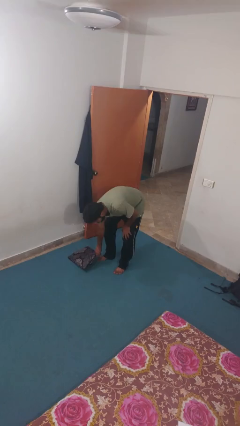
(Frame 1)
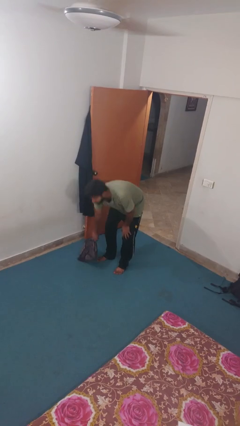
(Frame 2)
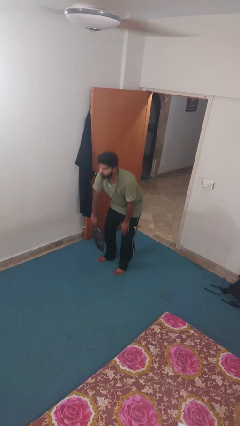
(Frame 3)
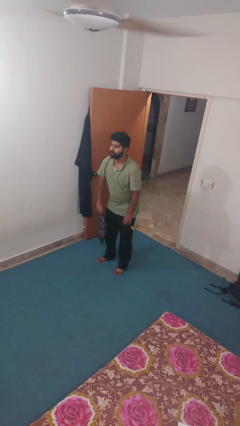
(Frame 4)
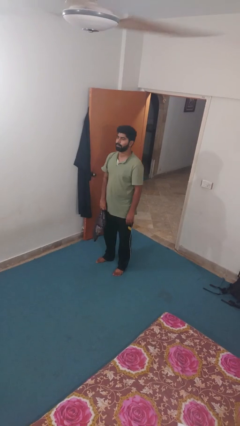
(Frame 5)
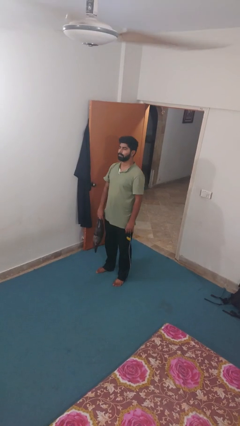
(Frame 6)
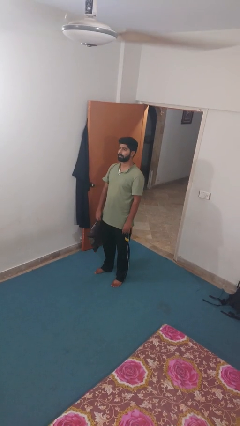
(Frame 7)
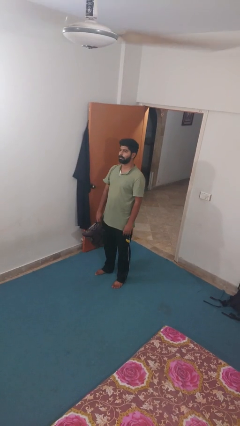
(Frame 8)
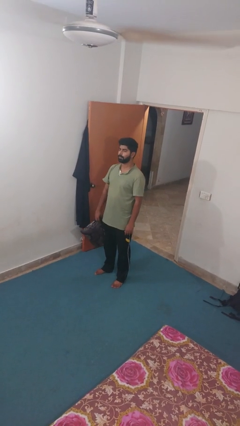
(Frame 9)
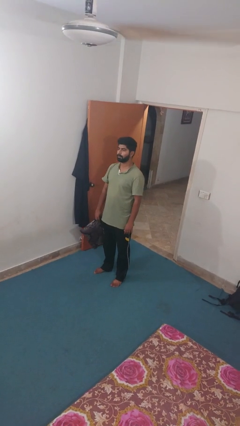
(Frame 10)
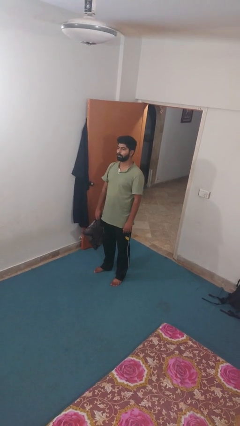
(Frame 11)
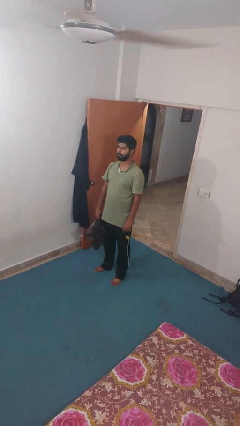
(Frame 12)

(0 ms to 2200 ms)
person picks up object from floor

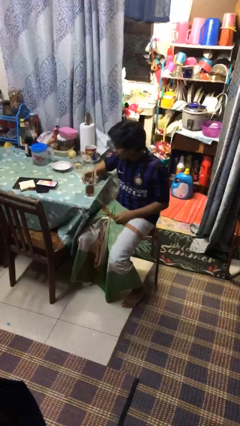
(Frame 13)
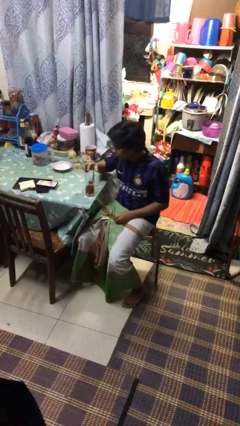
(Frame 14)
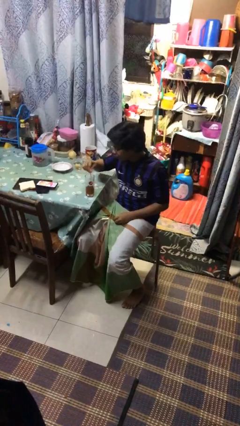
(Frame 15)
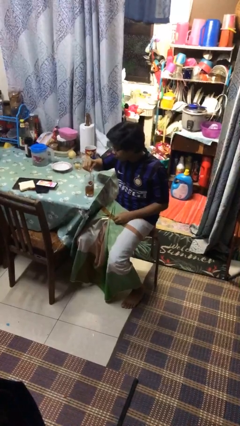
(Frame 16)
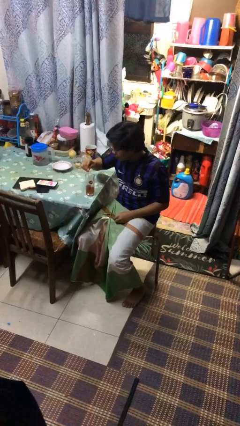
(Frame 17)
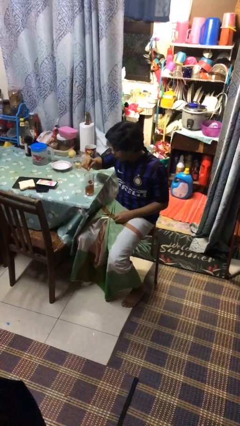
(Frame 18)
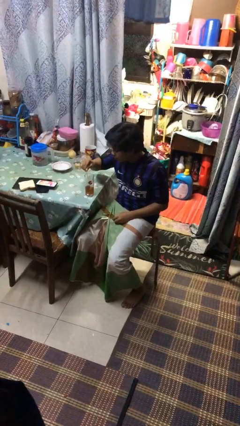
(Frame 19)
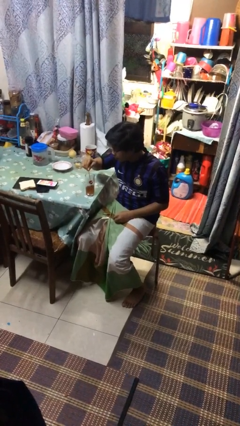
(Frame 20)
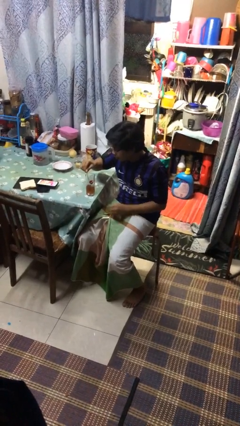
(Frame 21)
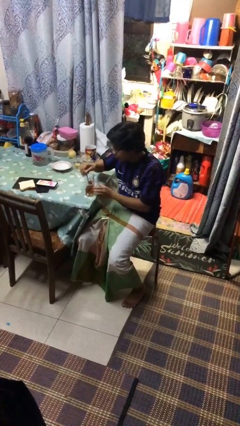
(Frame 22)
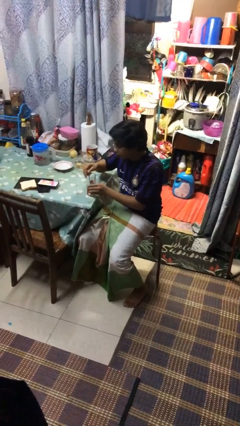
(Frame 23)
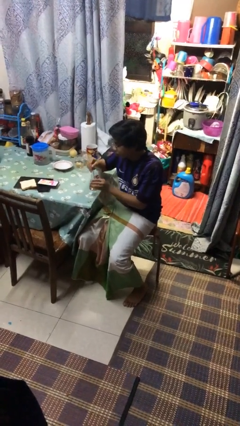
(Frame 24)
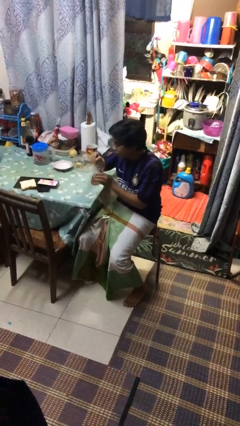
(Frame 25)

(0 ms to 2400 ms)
person stirs mug

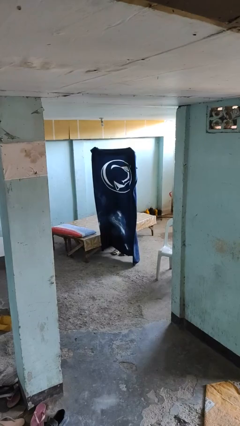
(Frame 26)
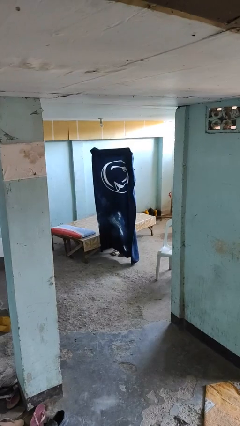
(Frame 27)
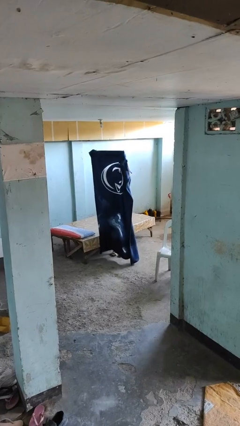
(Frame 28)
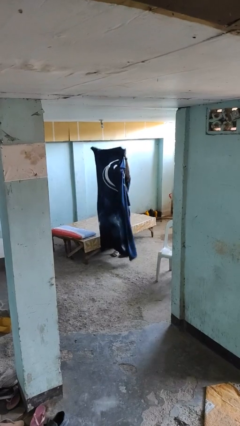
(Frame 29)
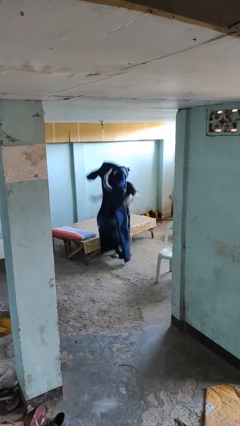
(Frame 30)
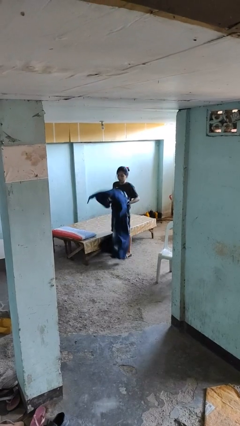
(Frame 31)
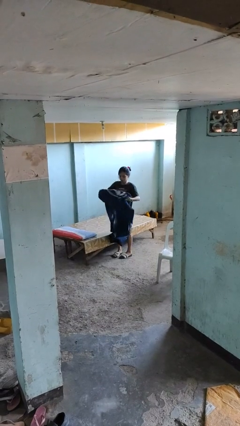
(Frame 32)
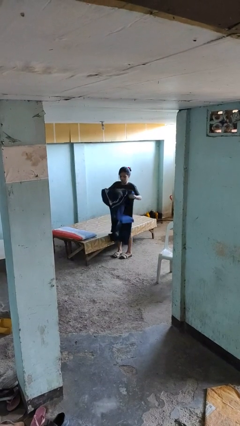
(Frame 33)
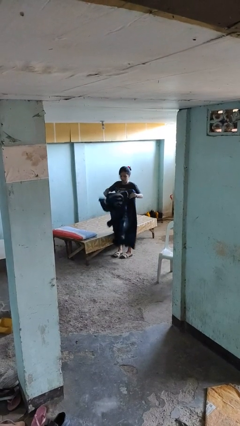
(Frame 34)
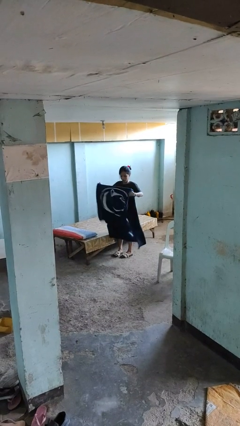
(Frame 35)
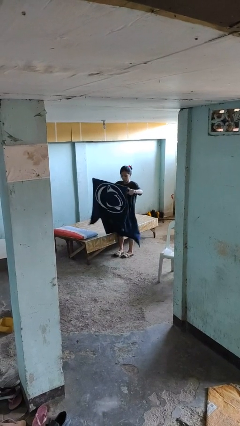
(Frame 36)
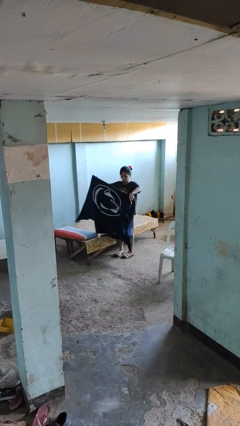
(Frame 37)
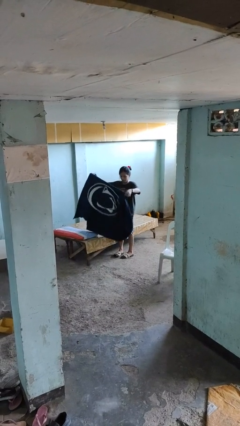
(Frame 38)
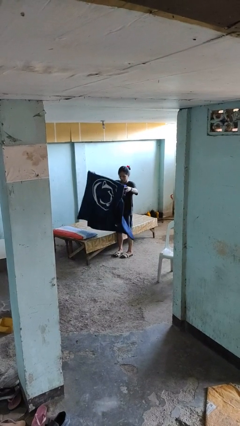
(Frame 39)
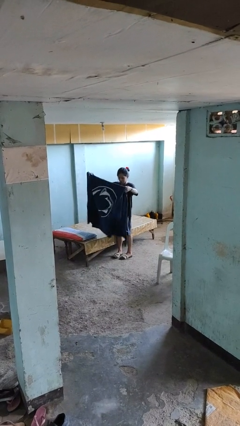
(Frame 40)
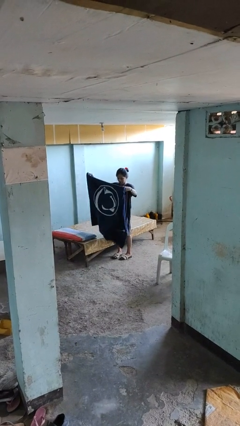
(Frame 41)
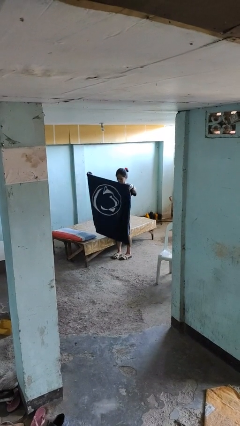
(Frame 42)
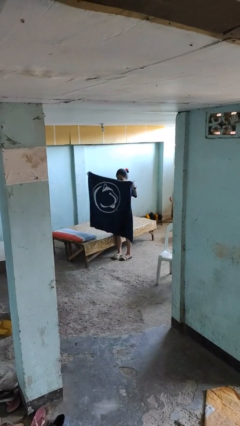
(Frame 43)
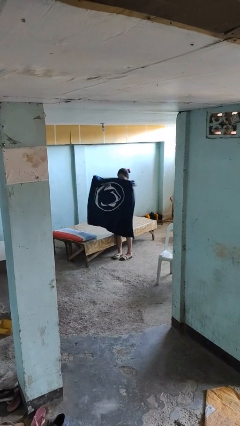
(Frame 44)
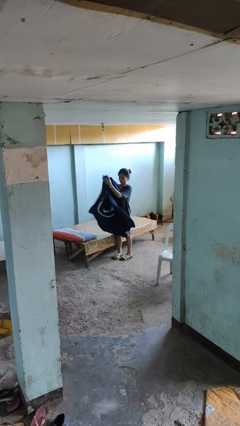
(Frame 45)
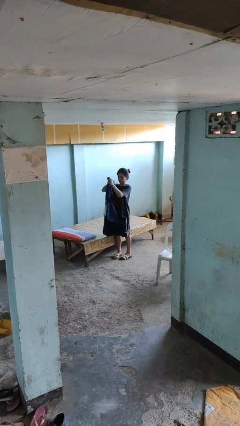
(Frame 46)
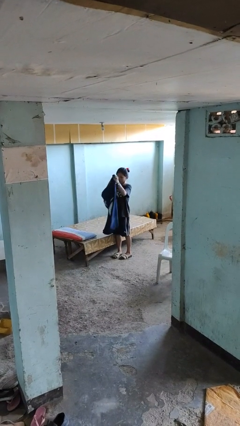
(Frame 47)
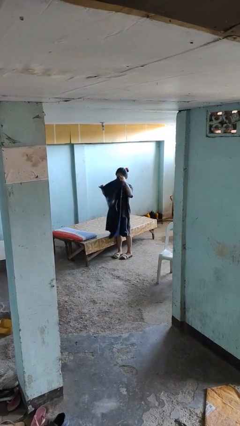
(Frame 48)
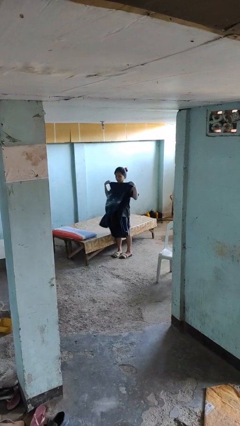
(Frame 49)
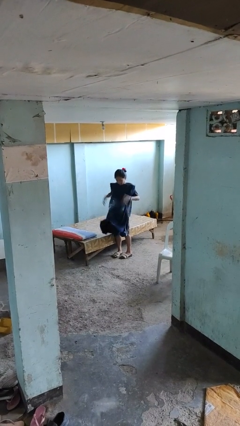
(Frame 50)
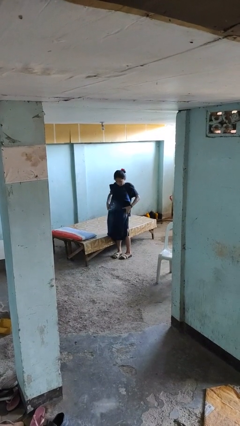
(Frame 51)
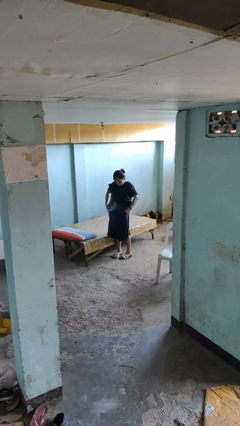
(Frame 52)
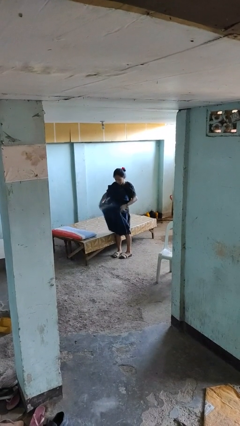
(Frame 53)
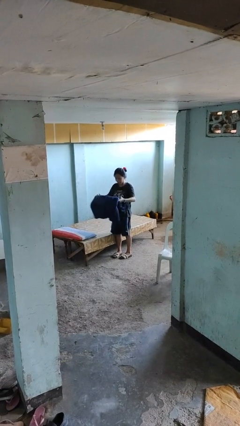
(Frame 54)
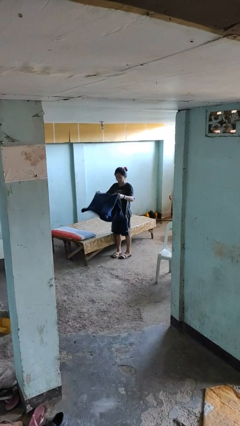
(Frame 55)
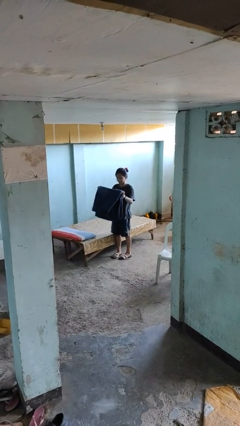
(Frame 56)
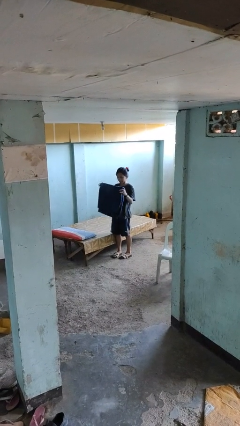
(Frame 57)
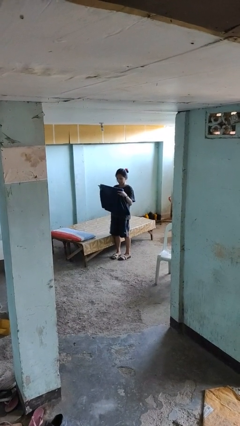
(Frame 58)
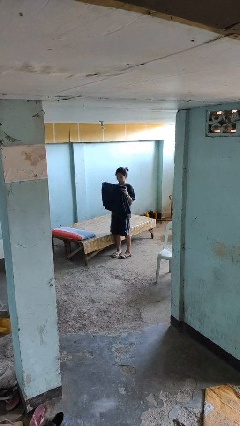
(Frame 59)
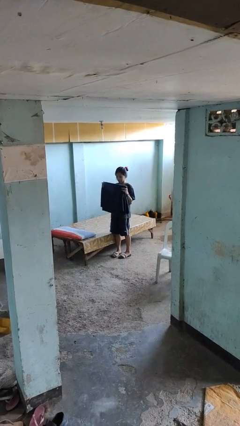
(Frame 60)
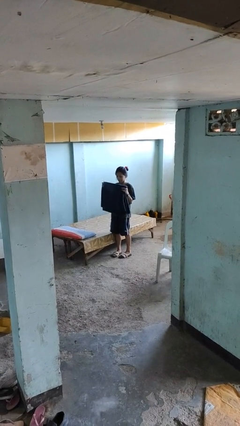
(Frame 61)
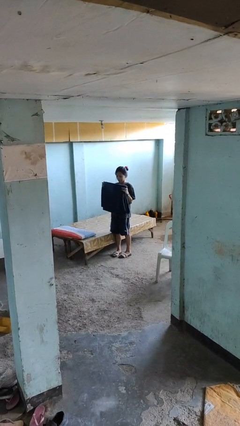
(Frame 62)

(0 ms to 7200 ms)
person folds blanket

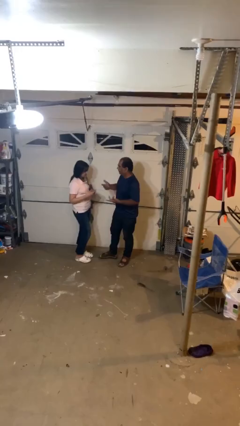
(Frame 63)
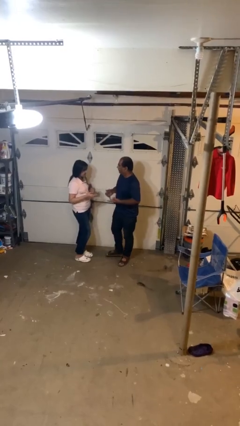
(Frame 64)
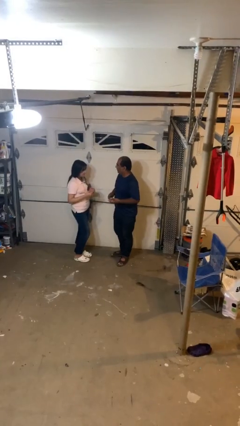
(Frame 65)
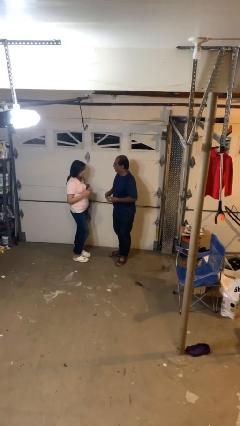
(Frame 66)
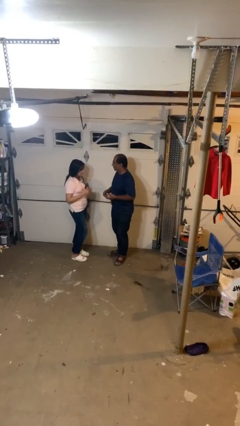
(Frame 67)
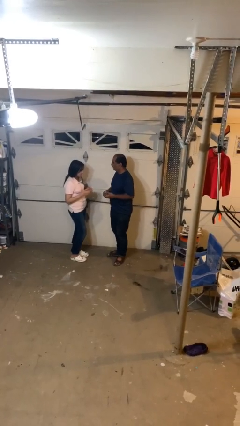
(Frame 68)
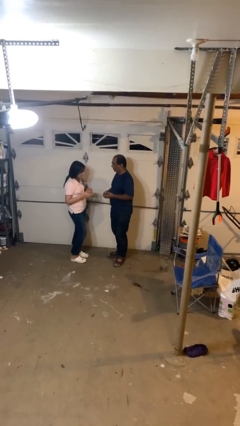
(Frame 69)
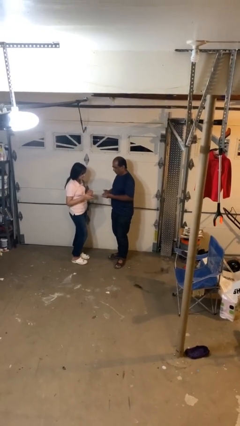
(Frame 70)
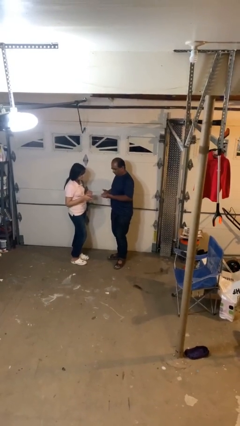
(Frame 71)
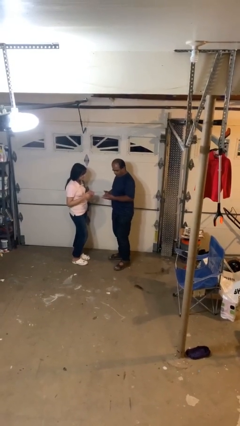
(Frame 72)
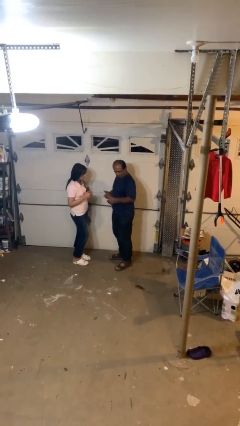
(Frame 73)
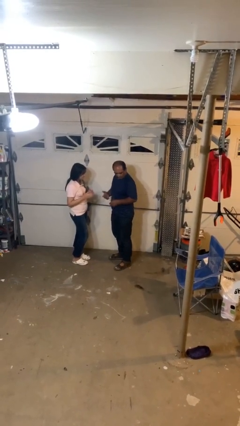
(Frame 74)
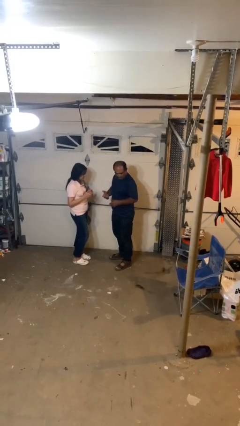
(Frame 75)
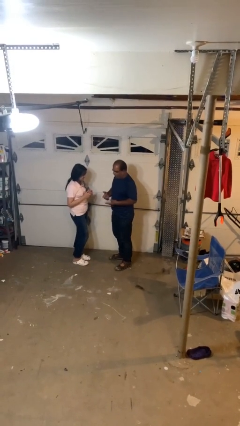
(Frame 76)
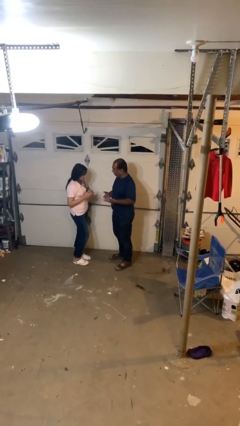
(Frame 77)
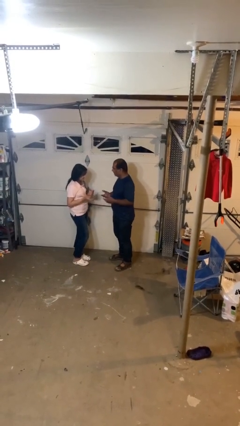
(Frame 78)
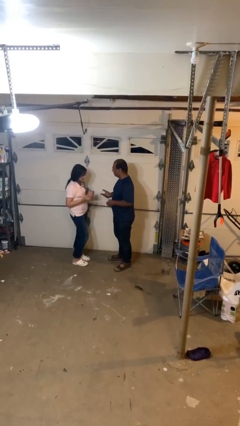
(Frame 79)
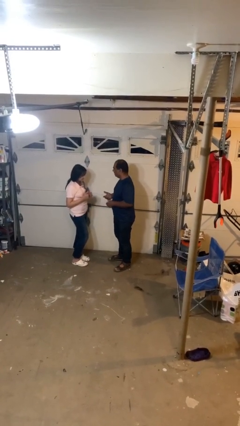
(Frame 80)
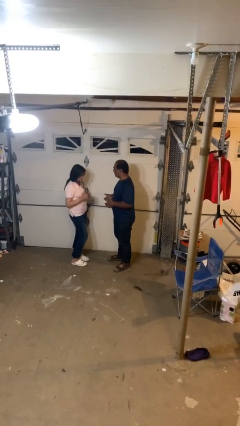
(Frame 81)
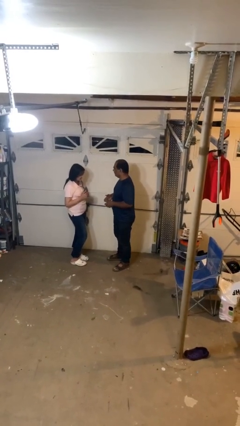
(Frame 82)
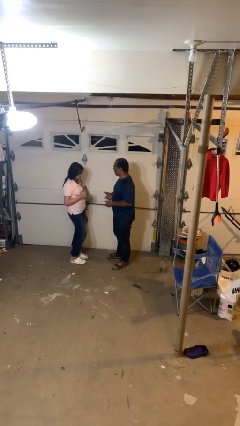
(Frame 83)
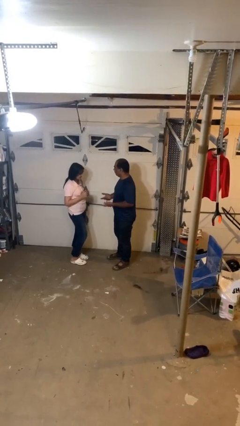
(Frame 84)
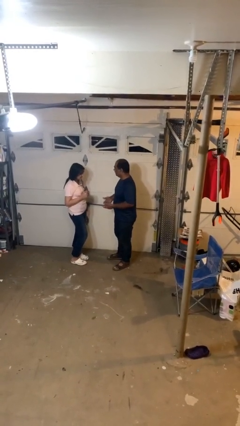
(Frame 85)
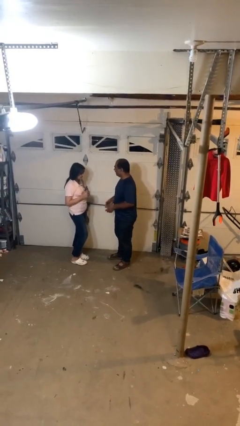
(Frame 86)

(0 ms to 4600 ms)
person talks to person

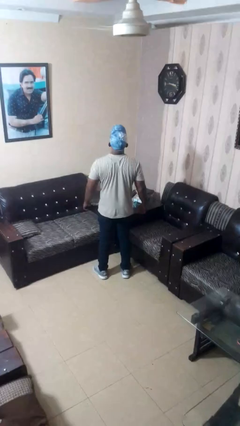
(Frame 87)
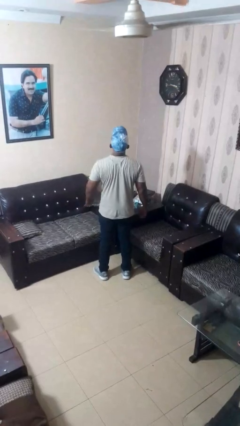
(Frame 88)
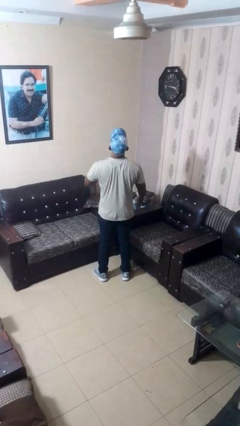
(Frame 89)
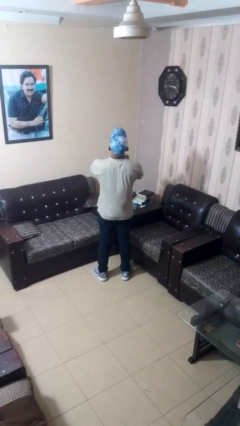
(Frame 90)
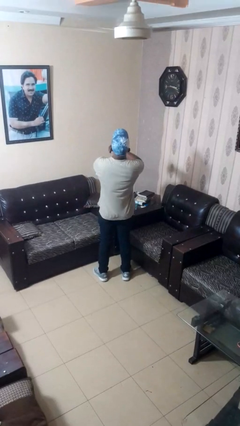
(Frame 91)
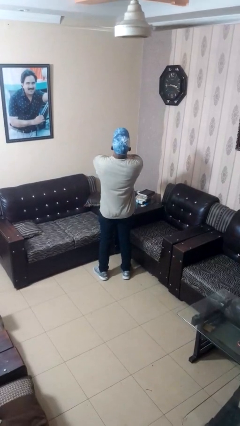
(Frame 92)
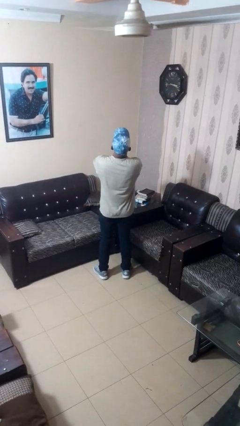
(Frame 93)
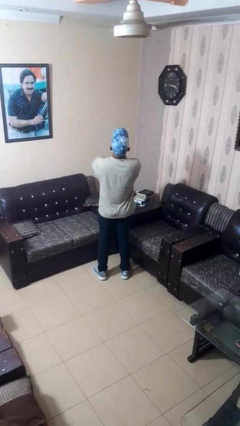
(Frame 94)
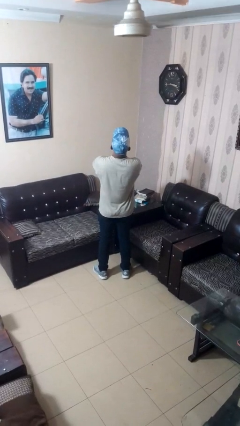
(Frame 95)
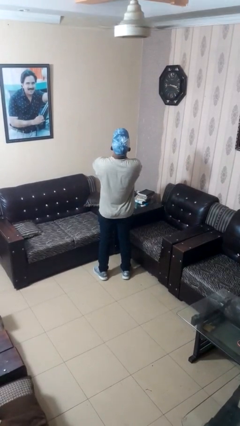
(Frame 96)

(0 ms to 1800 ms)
person crosses arms
